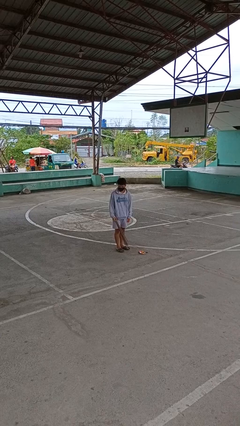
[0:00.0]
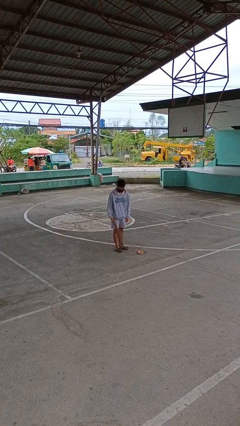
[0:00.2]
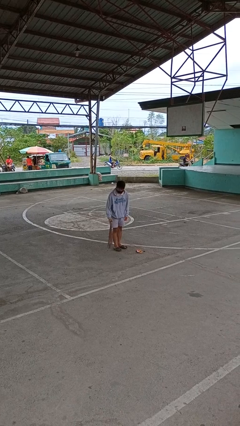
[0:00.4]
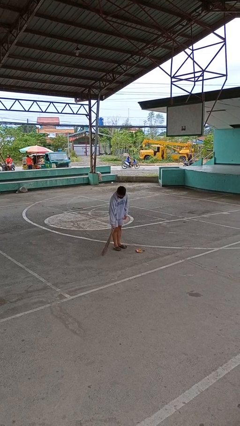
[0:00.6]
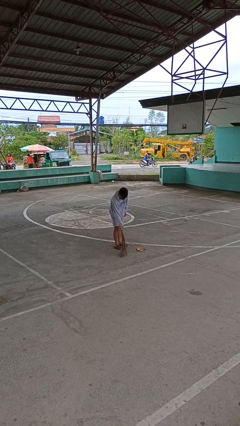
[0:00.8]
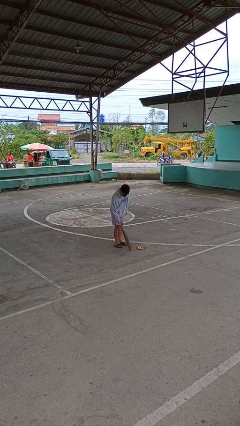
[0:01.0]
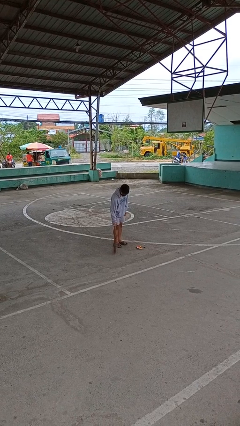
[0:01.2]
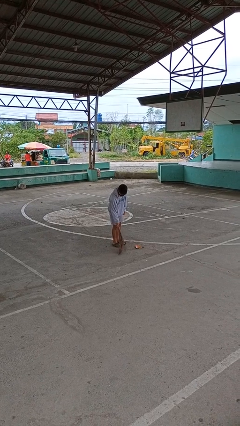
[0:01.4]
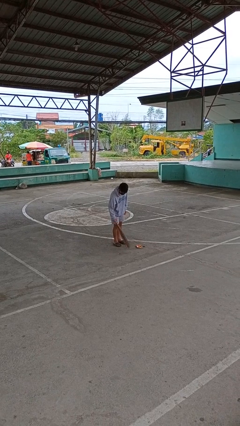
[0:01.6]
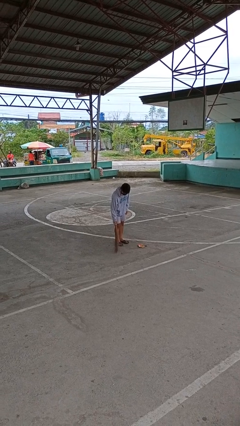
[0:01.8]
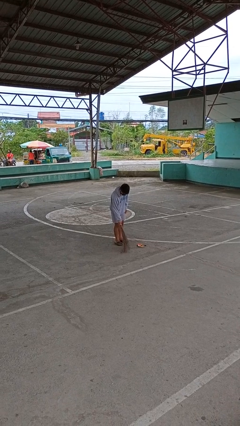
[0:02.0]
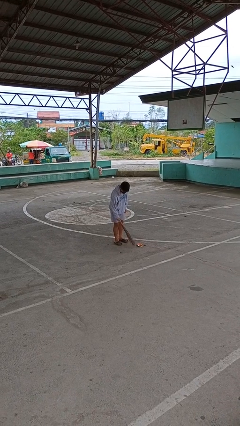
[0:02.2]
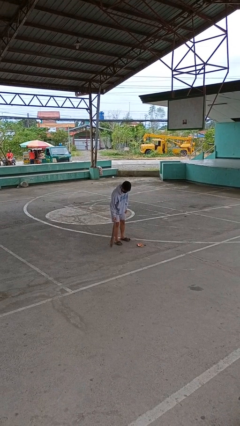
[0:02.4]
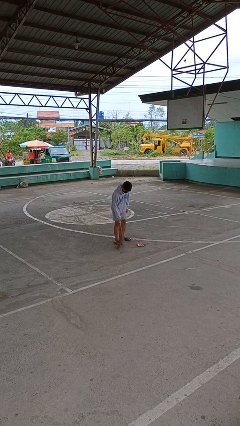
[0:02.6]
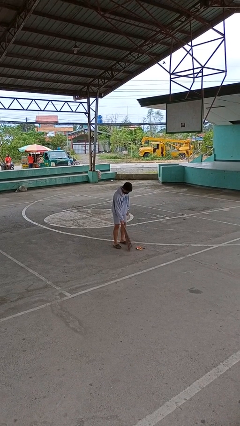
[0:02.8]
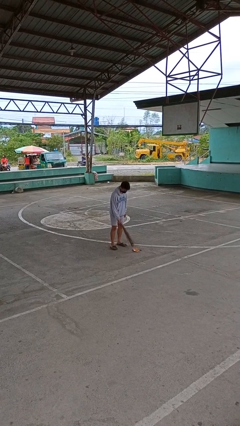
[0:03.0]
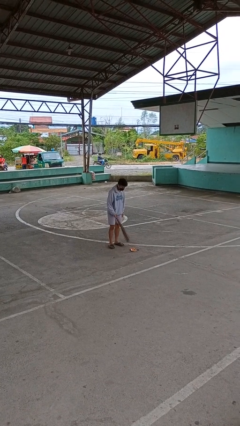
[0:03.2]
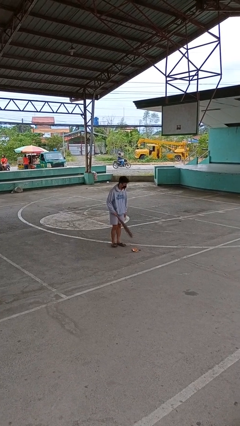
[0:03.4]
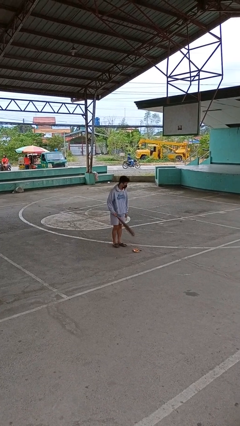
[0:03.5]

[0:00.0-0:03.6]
person sweeps floor

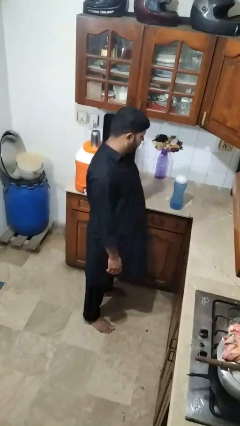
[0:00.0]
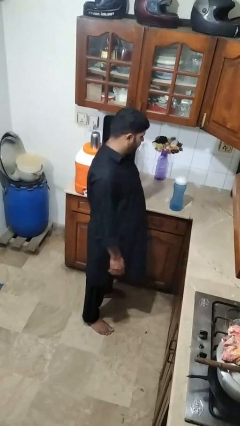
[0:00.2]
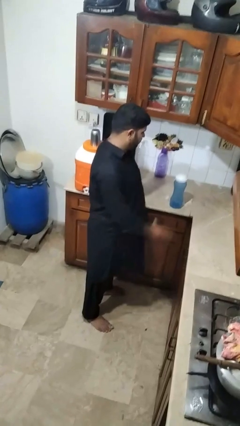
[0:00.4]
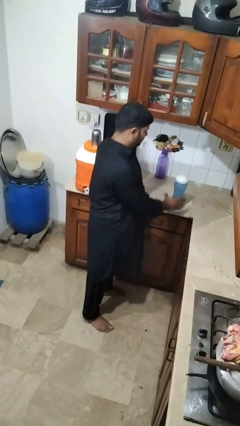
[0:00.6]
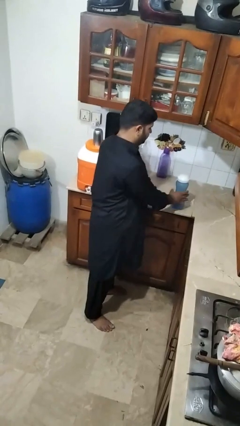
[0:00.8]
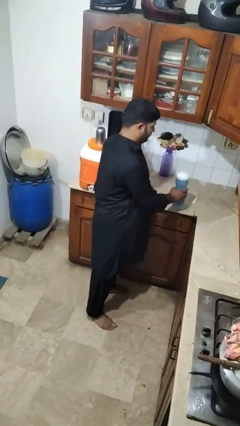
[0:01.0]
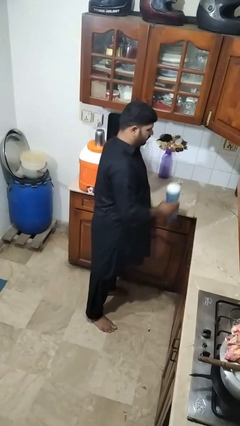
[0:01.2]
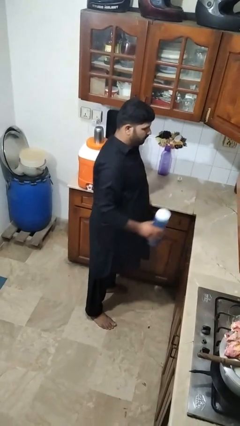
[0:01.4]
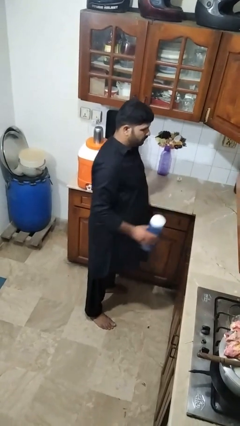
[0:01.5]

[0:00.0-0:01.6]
person picks up object from countertop

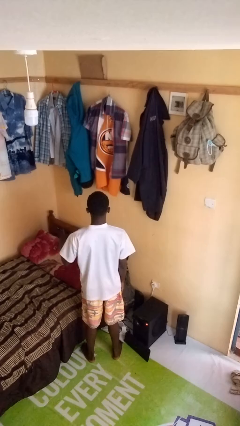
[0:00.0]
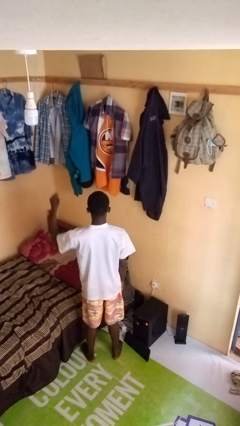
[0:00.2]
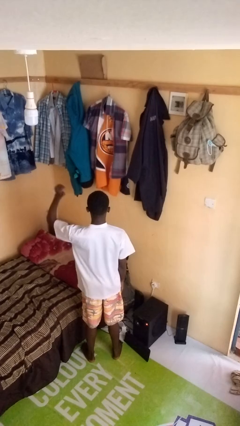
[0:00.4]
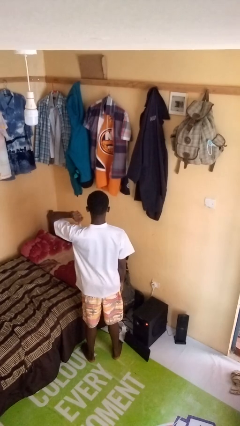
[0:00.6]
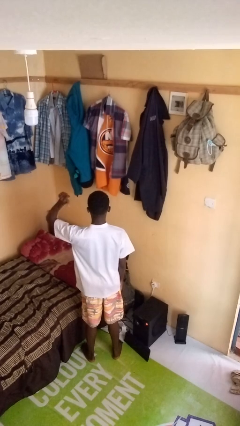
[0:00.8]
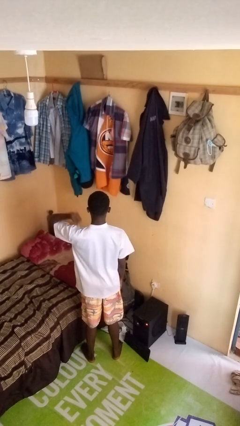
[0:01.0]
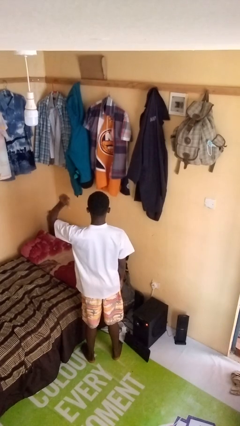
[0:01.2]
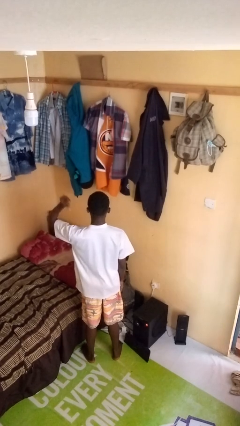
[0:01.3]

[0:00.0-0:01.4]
person gestures behind me

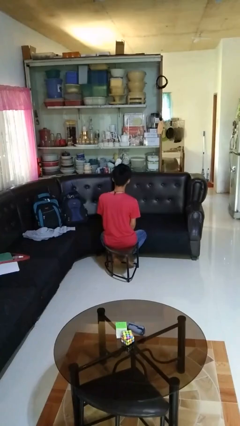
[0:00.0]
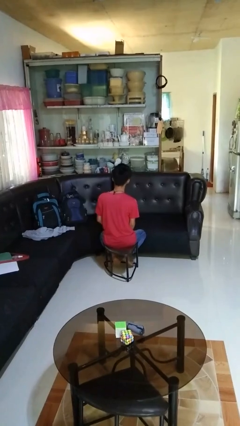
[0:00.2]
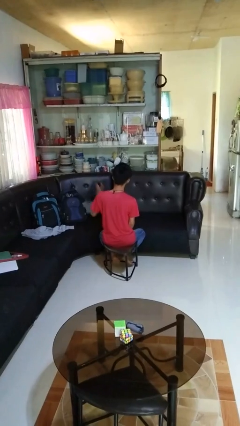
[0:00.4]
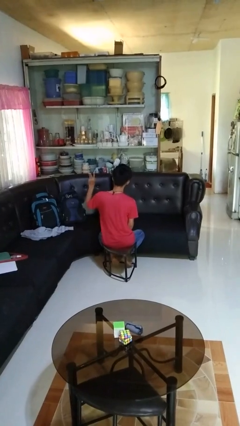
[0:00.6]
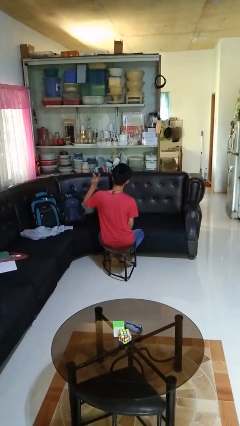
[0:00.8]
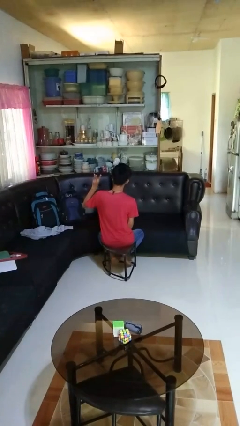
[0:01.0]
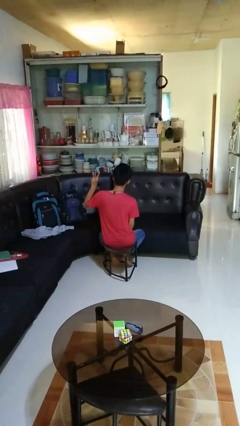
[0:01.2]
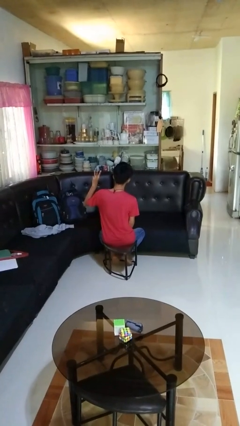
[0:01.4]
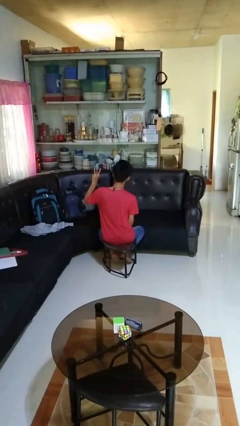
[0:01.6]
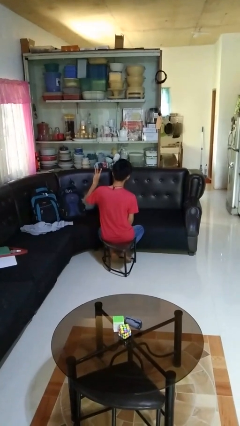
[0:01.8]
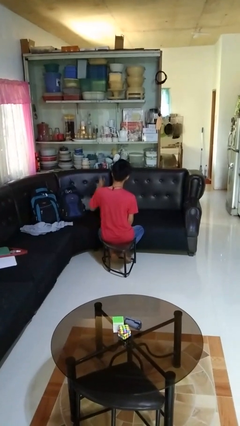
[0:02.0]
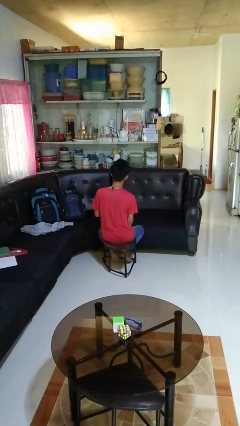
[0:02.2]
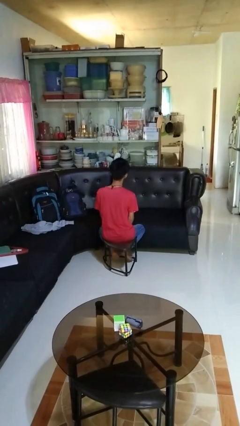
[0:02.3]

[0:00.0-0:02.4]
person gestures number three

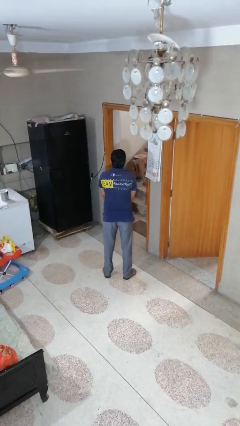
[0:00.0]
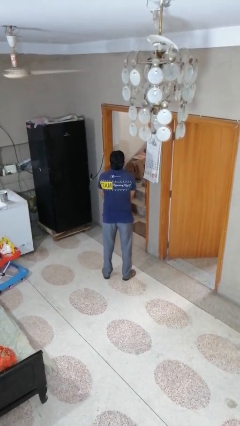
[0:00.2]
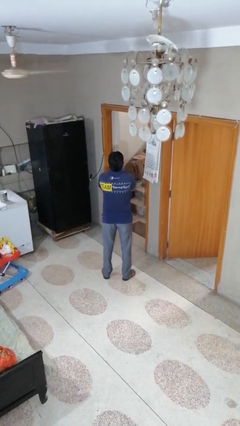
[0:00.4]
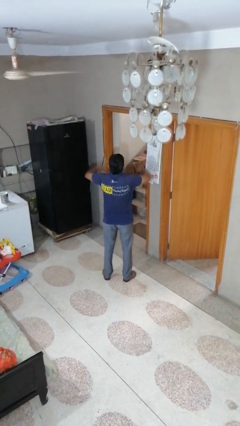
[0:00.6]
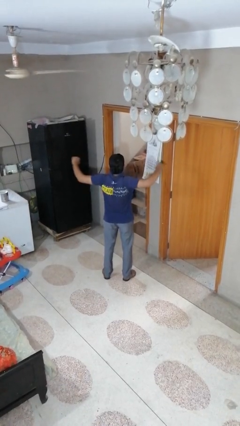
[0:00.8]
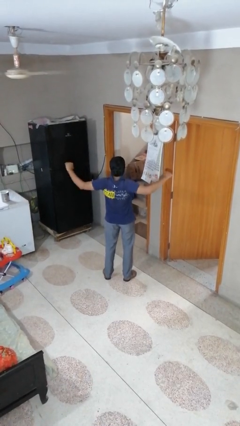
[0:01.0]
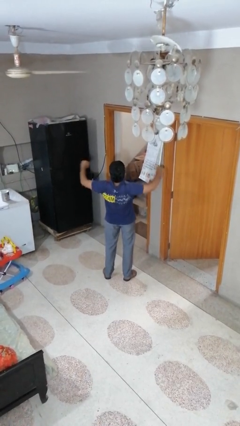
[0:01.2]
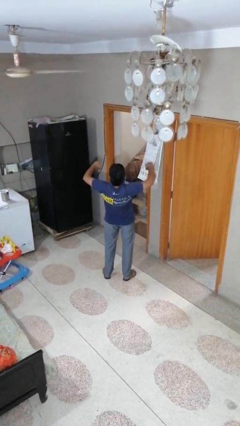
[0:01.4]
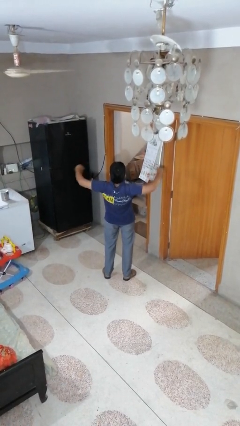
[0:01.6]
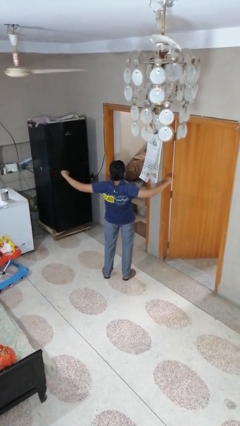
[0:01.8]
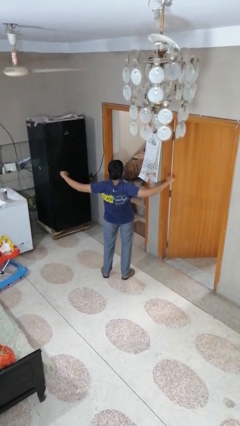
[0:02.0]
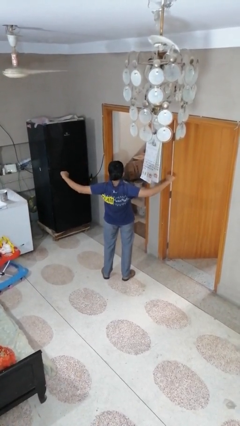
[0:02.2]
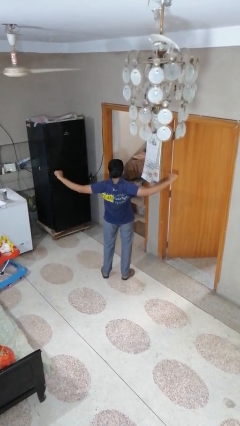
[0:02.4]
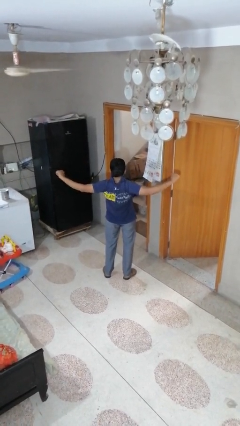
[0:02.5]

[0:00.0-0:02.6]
person stretches arms to side

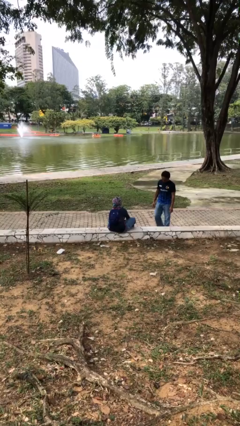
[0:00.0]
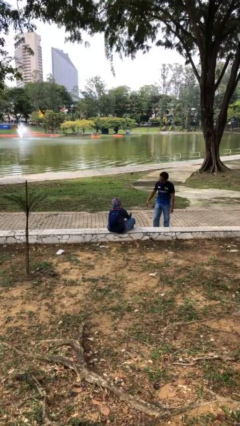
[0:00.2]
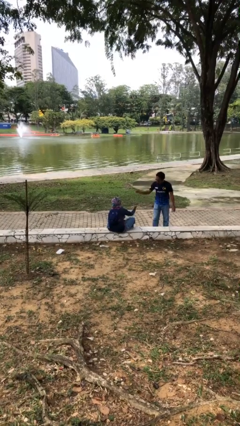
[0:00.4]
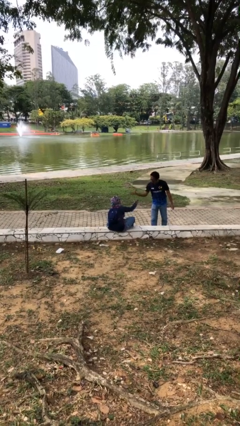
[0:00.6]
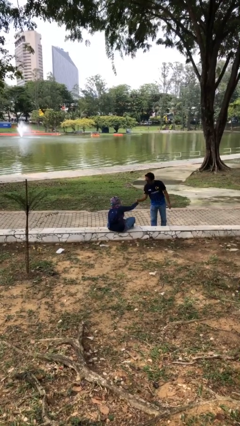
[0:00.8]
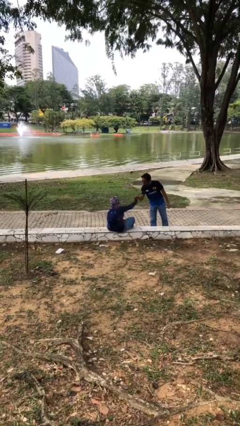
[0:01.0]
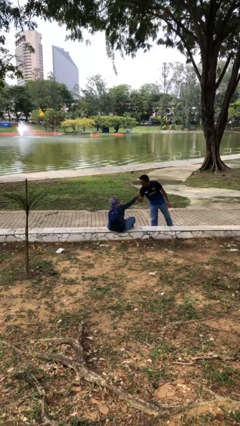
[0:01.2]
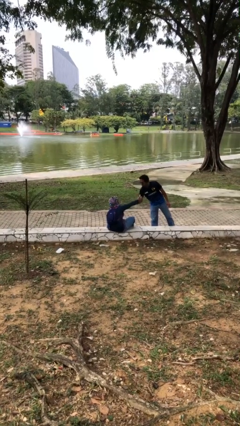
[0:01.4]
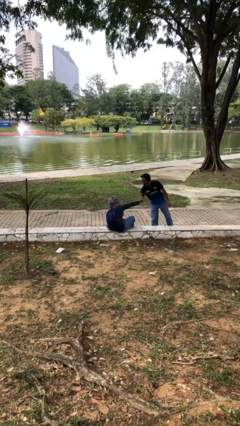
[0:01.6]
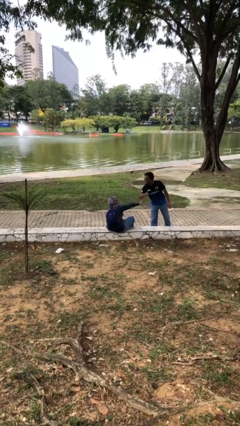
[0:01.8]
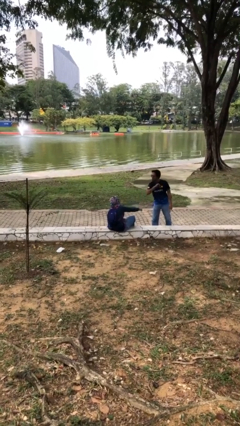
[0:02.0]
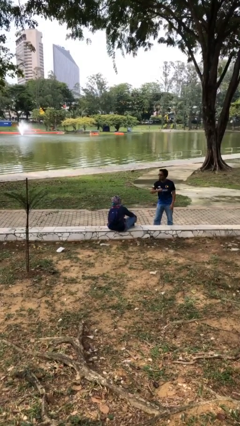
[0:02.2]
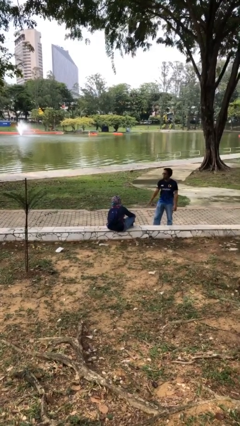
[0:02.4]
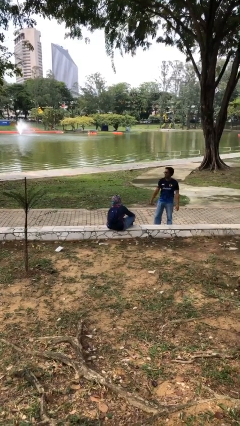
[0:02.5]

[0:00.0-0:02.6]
person shakes hand

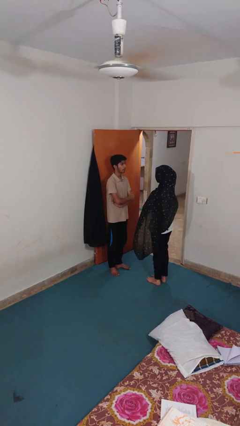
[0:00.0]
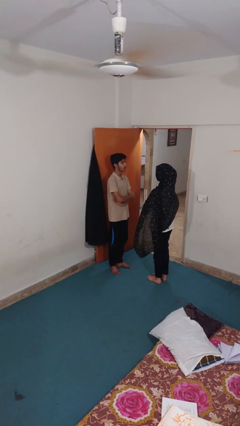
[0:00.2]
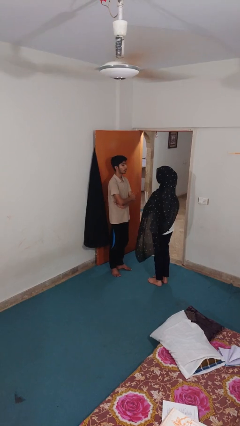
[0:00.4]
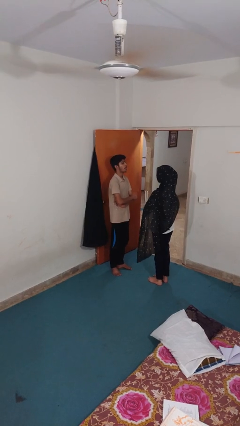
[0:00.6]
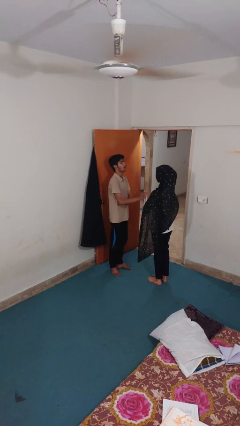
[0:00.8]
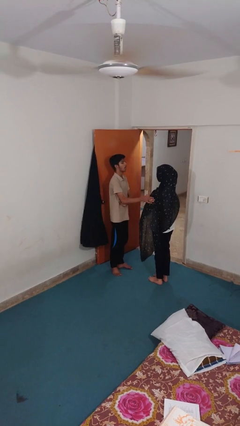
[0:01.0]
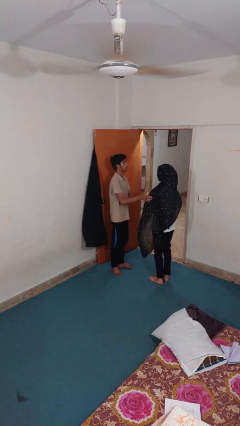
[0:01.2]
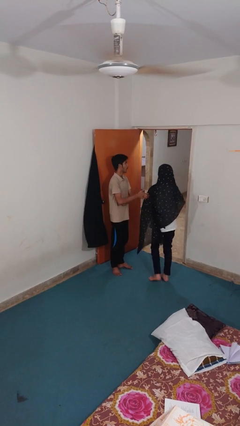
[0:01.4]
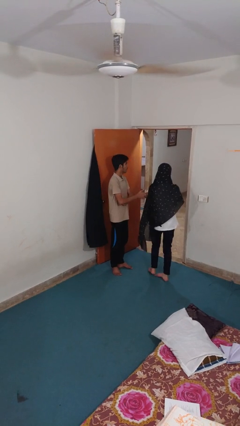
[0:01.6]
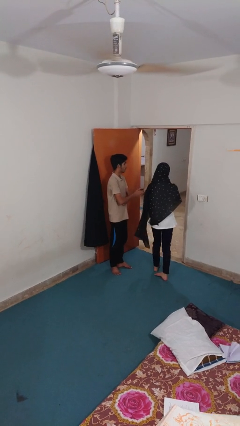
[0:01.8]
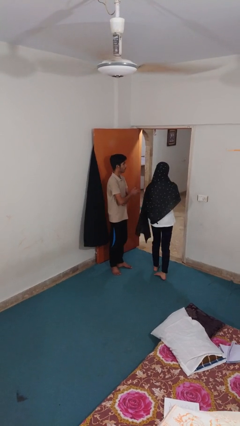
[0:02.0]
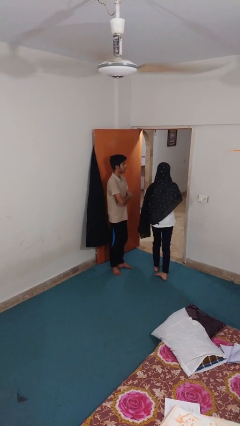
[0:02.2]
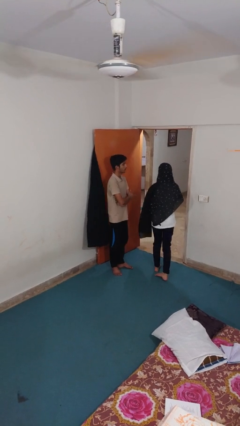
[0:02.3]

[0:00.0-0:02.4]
person shoves person

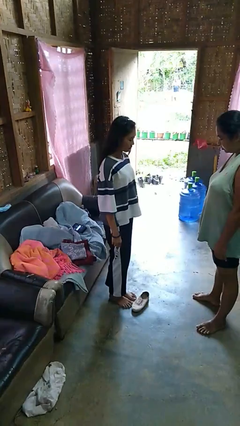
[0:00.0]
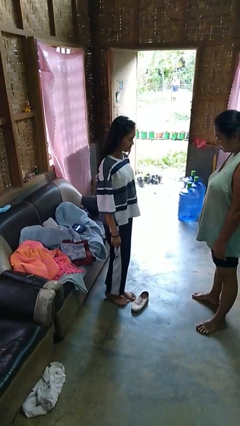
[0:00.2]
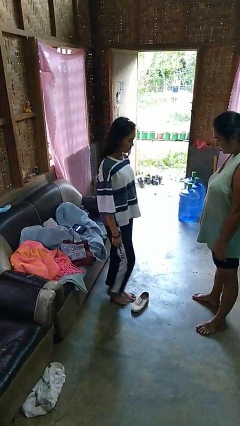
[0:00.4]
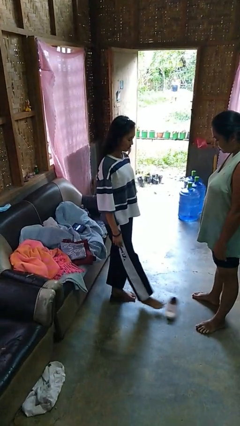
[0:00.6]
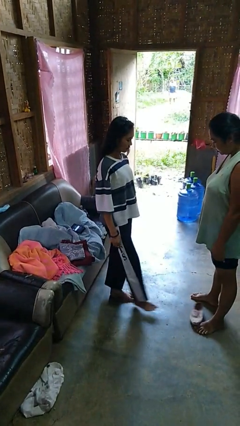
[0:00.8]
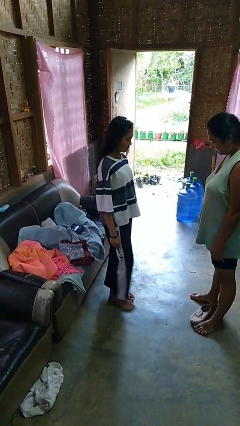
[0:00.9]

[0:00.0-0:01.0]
person kicks object to person
